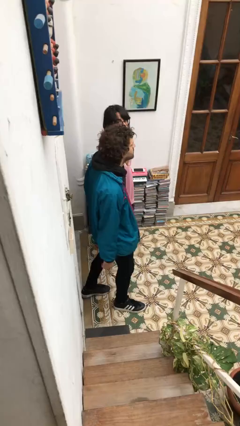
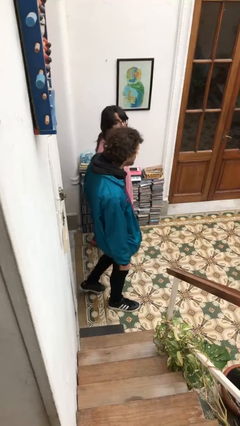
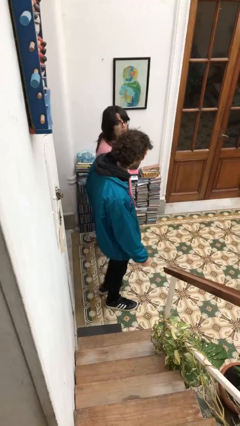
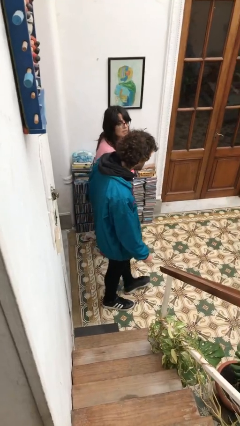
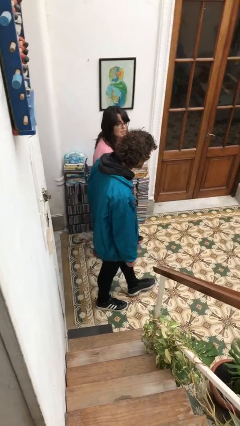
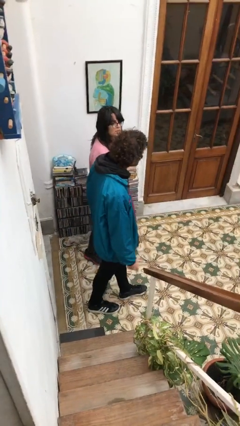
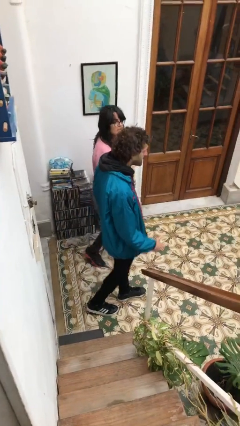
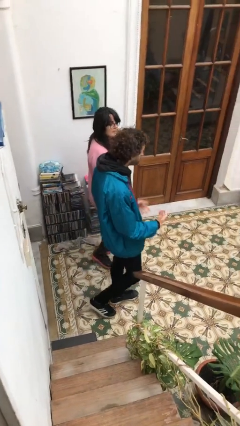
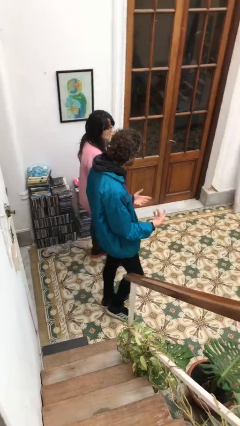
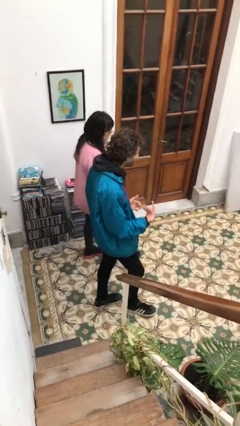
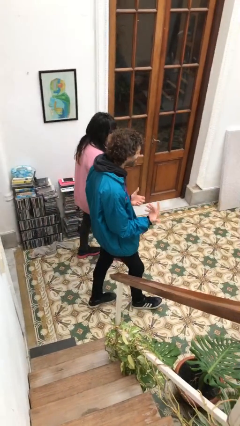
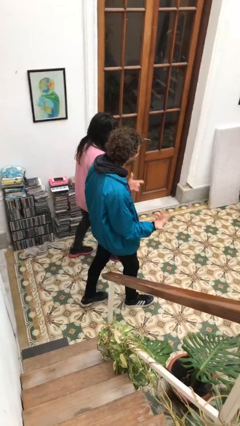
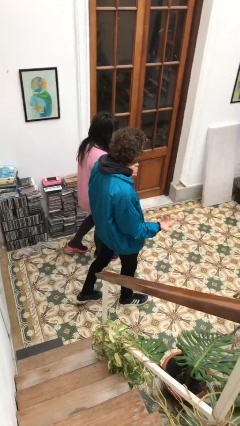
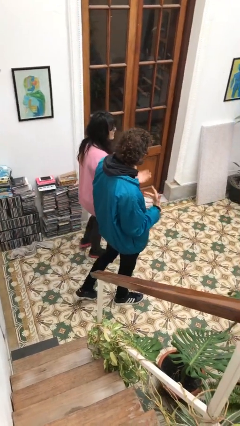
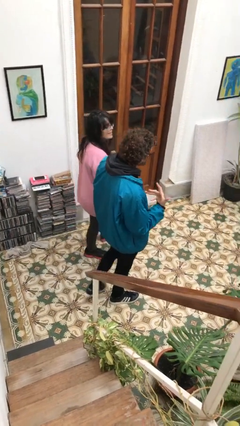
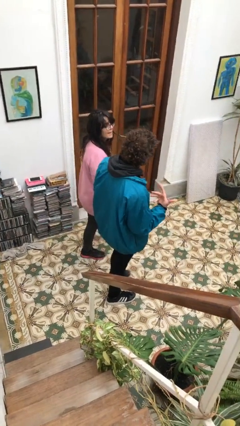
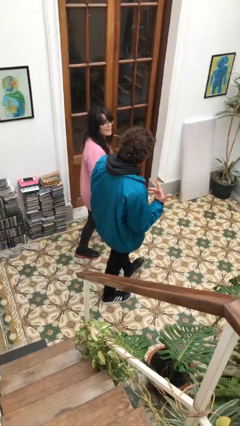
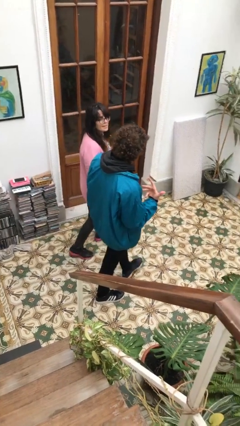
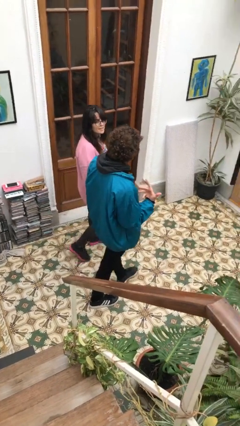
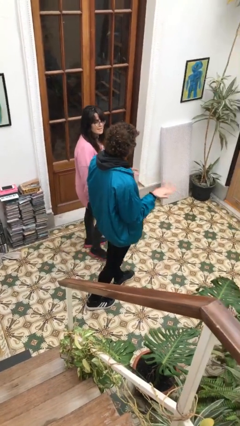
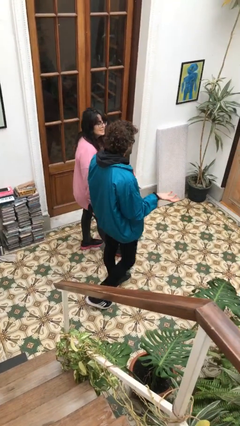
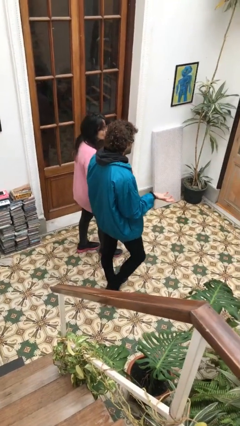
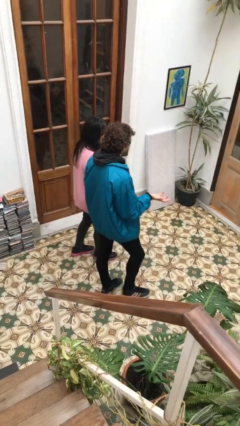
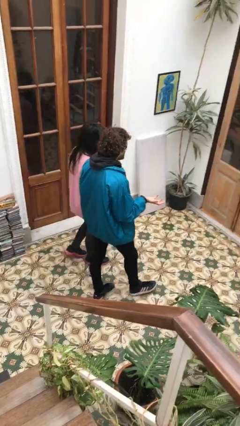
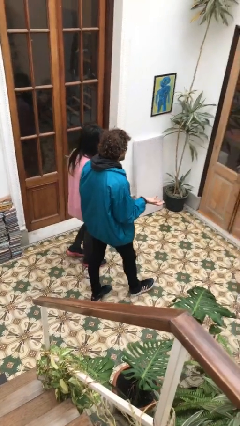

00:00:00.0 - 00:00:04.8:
person talks to person

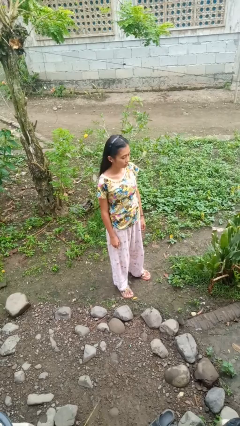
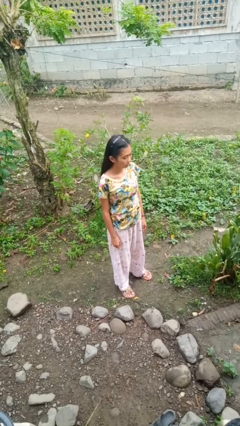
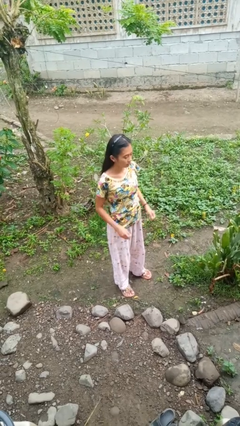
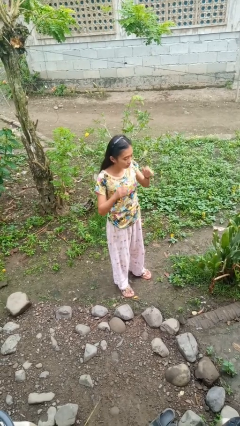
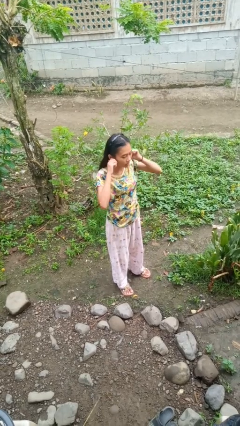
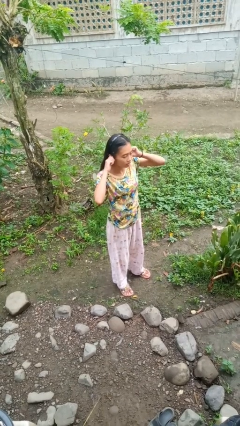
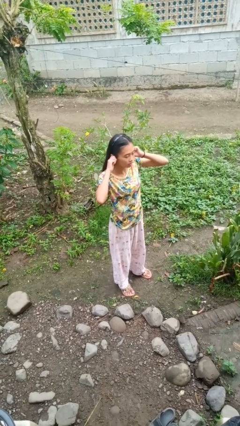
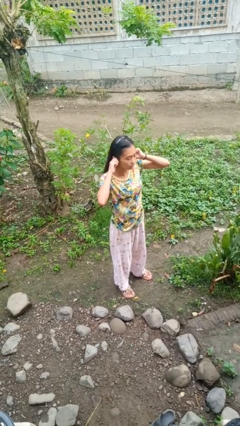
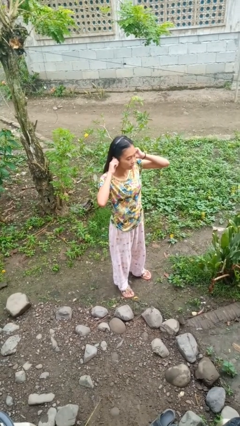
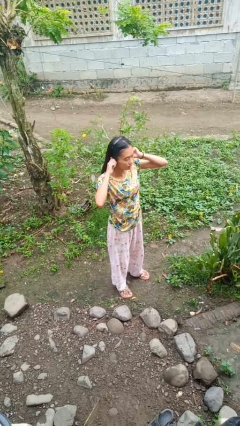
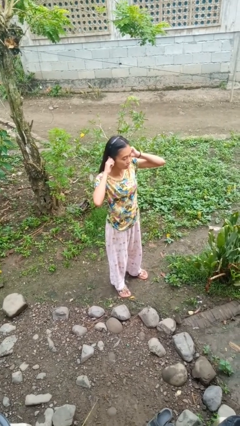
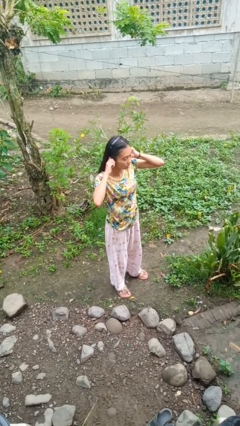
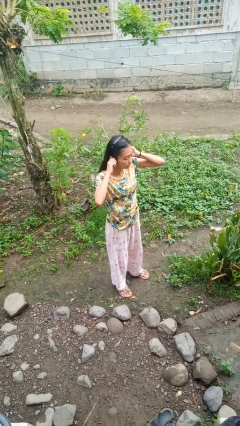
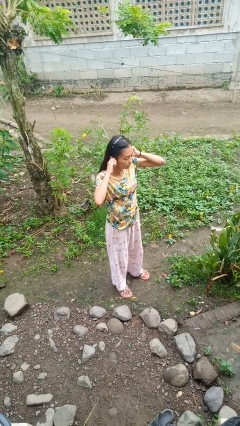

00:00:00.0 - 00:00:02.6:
person puts fingers in ear

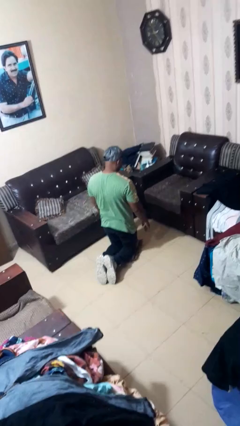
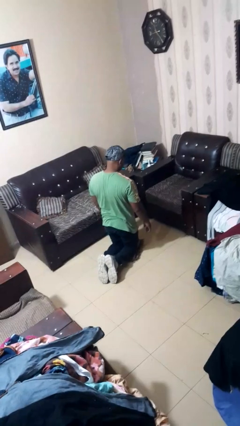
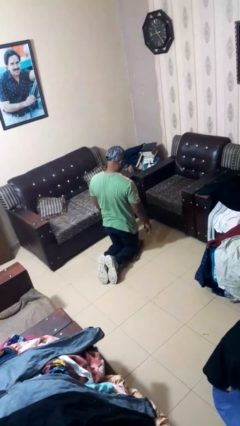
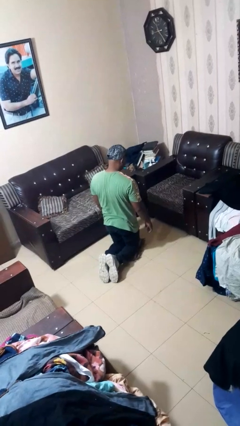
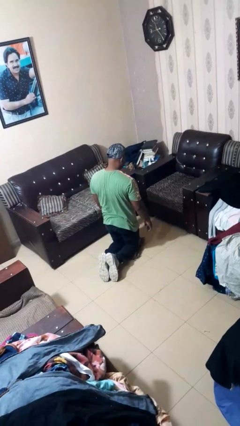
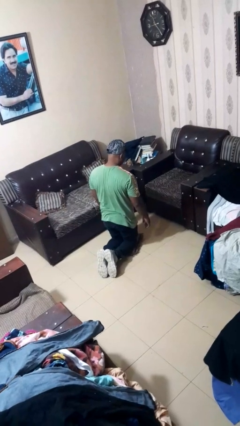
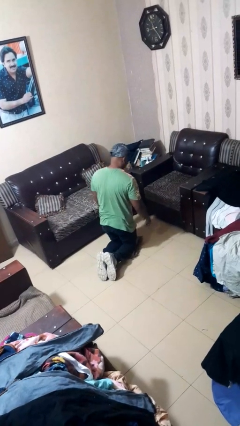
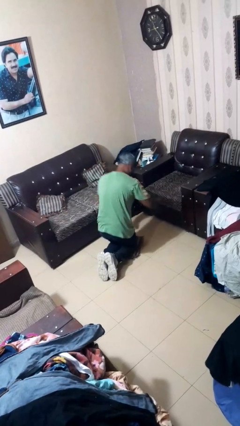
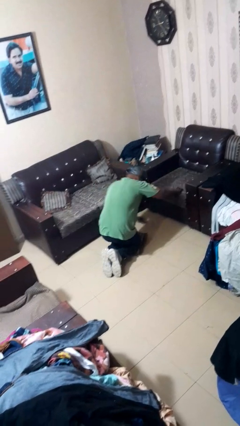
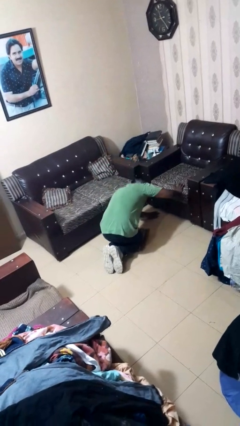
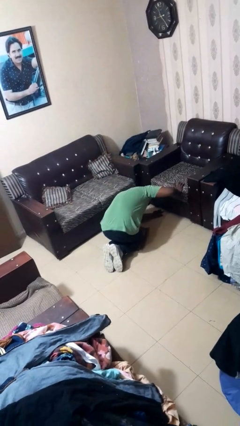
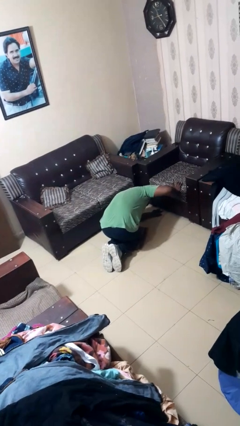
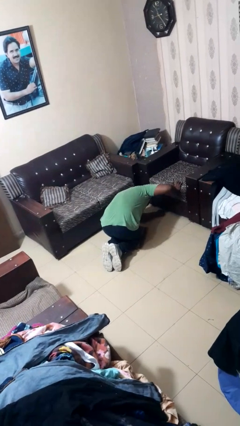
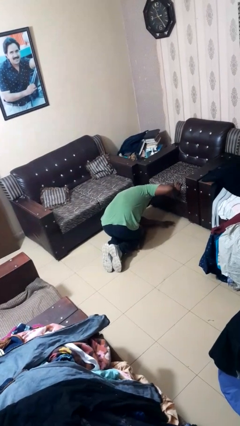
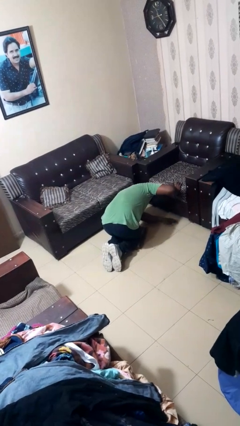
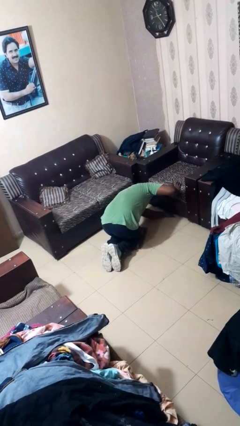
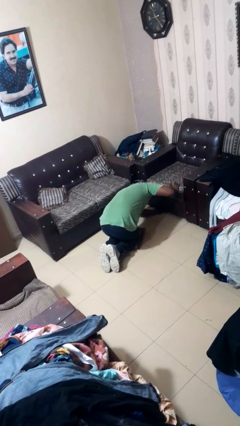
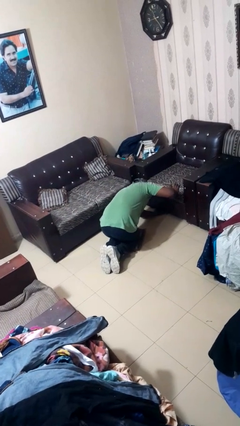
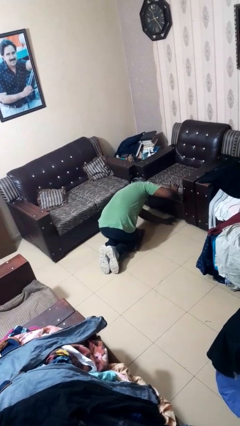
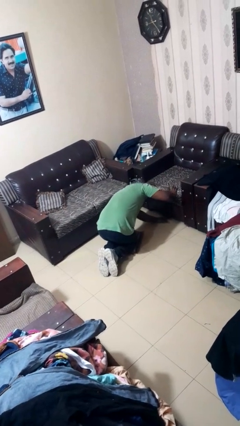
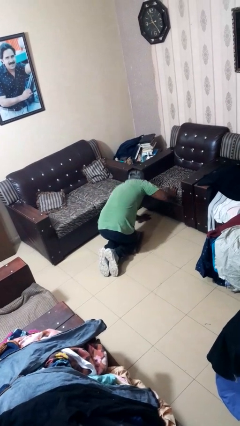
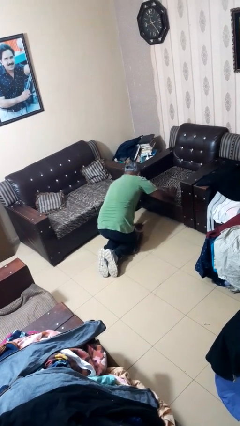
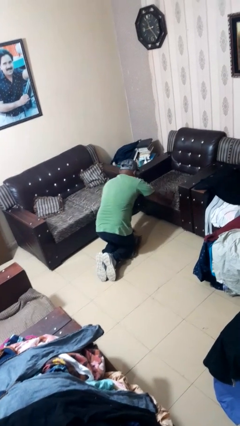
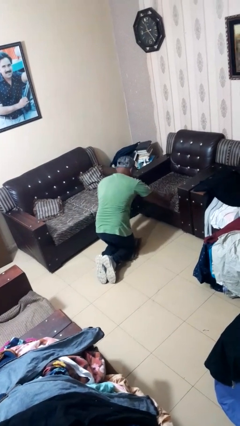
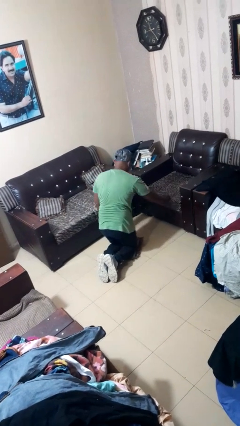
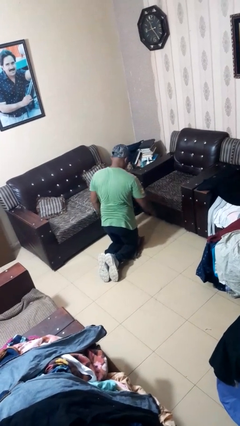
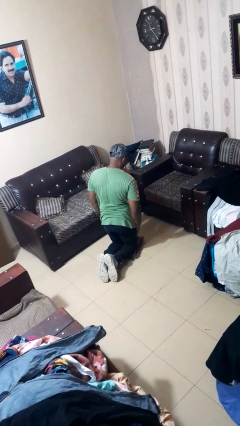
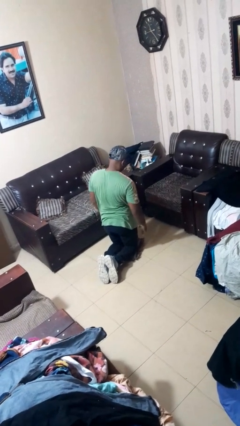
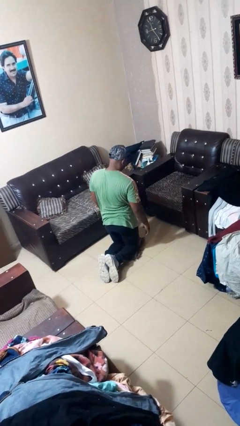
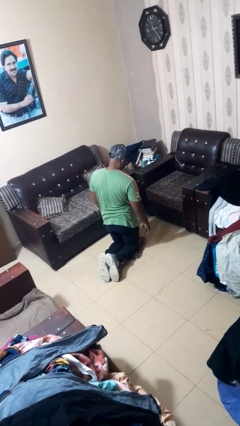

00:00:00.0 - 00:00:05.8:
person searches under couch

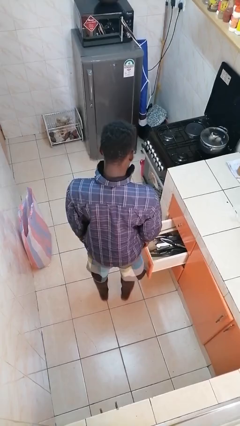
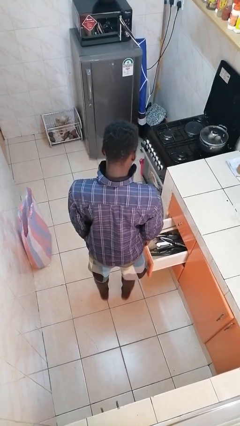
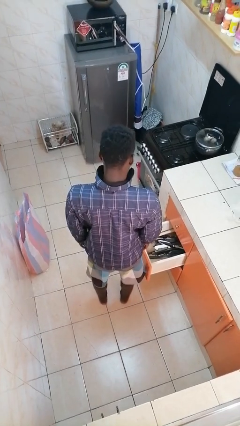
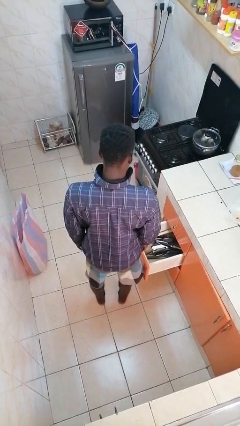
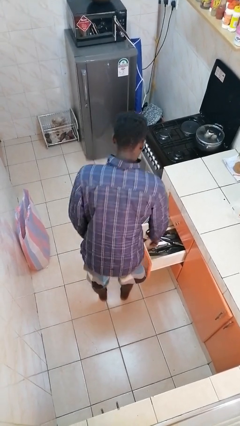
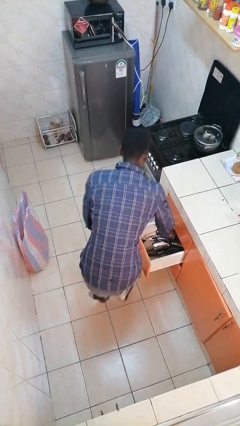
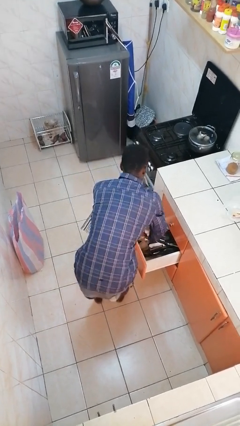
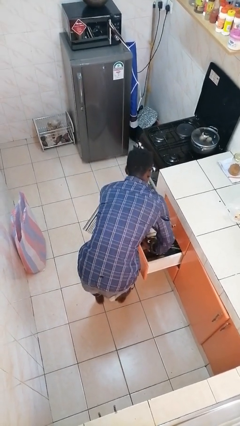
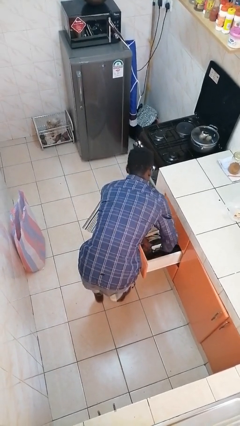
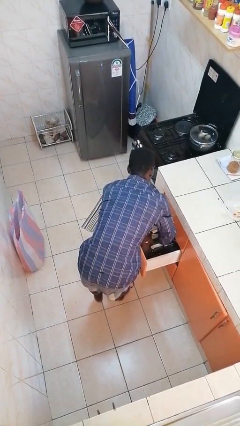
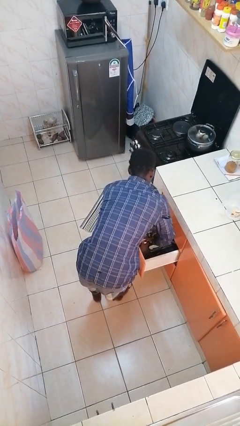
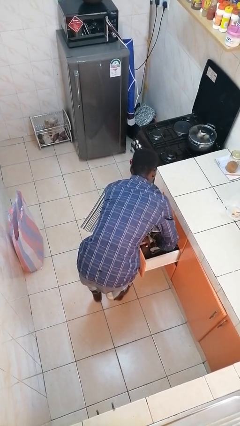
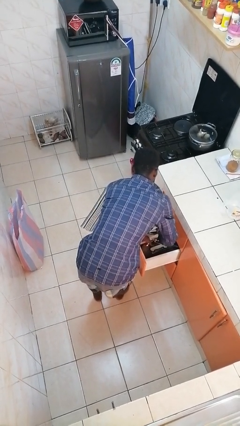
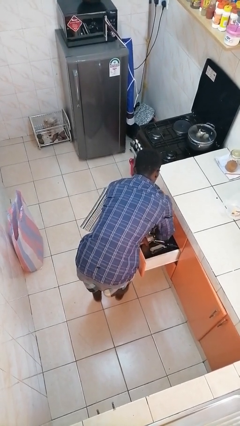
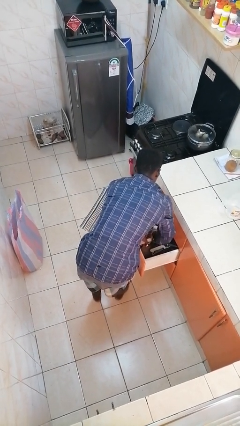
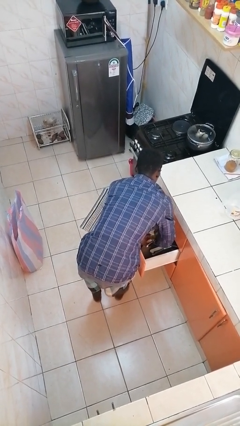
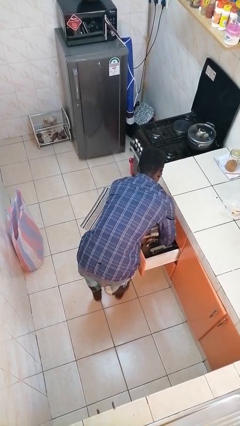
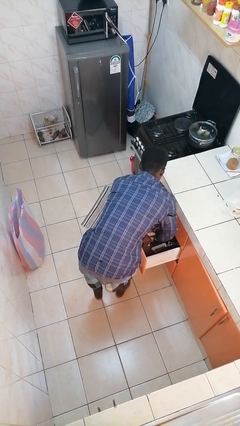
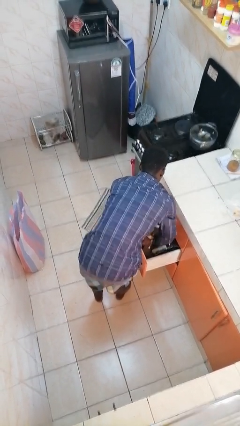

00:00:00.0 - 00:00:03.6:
person searches in kitchen drawer

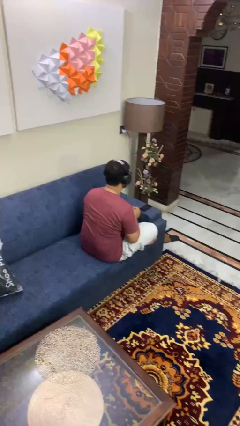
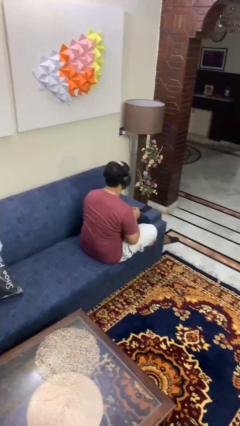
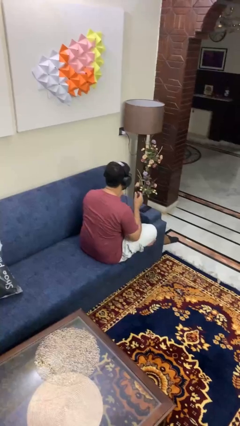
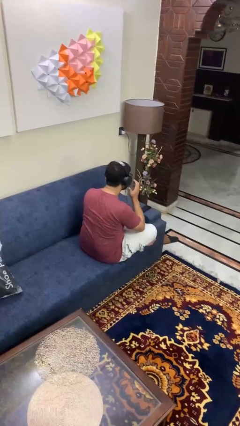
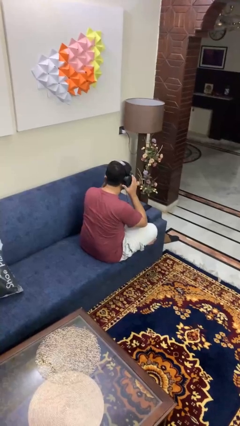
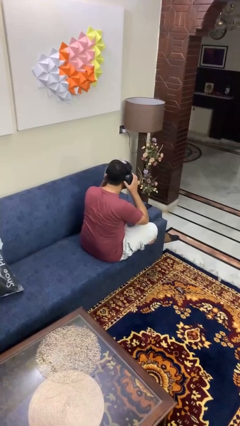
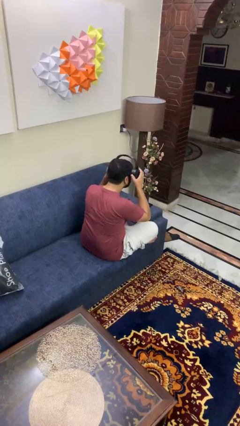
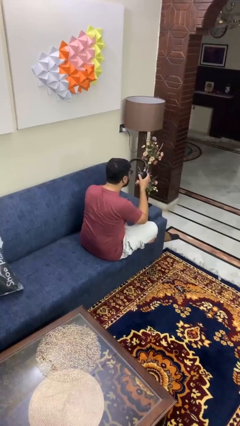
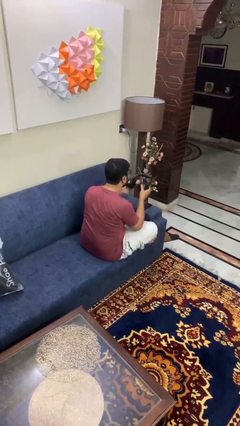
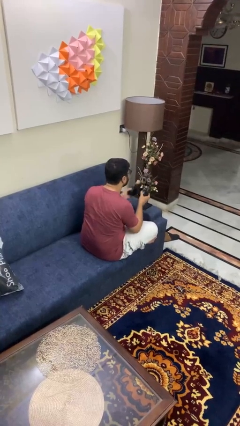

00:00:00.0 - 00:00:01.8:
person takes off headphones
